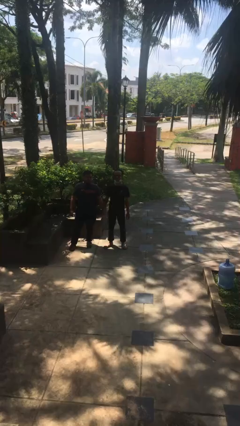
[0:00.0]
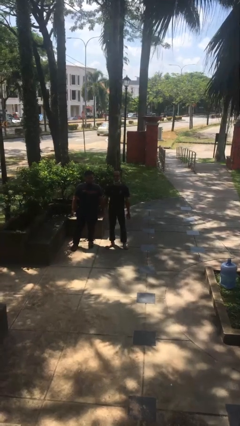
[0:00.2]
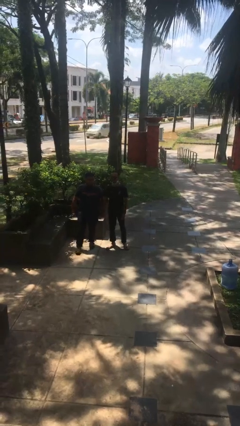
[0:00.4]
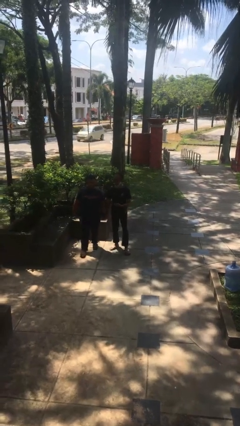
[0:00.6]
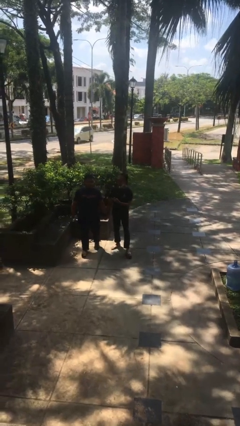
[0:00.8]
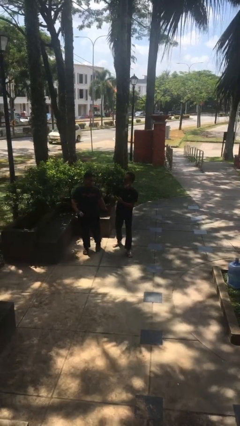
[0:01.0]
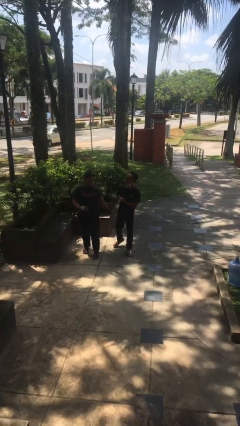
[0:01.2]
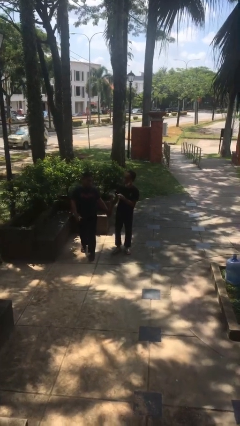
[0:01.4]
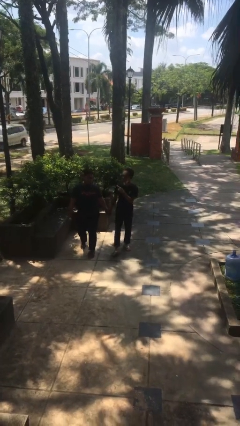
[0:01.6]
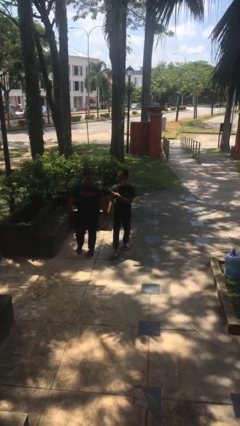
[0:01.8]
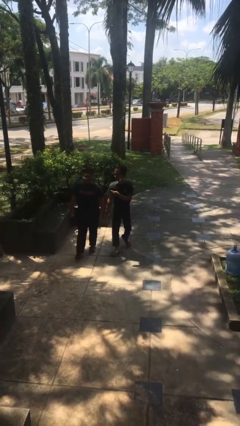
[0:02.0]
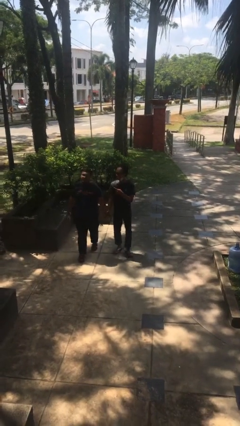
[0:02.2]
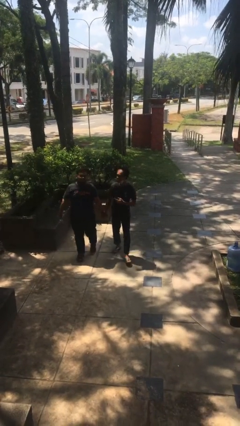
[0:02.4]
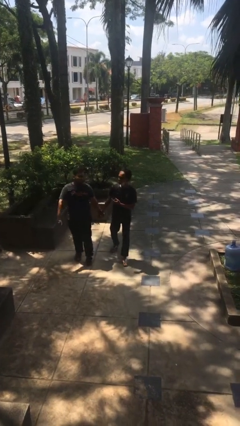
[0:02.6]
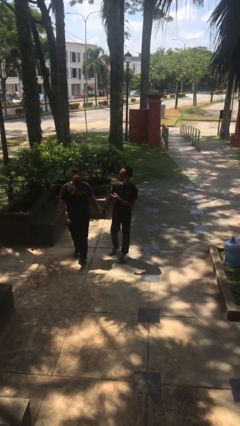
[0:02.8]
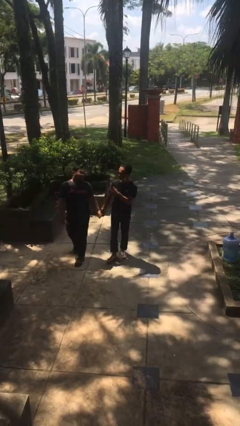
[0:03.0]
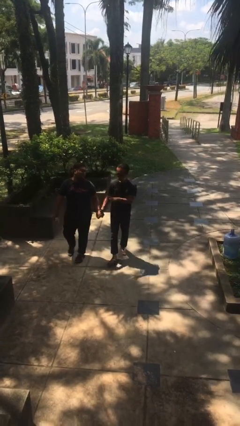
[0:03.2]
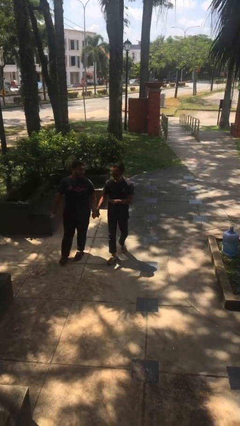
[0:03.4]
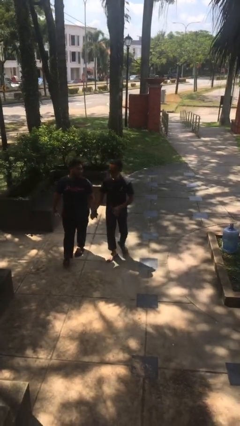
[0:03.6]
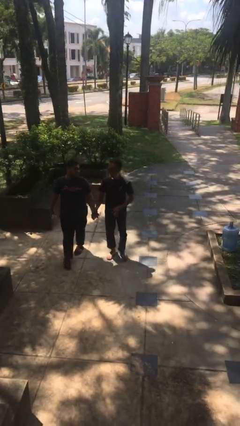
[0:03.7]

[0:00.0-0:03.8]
person holds hand

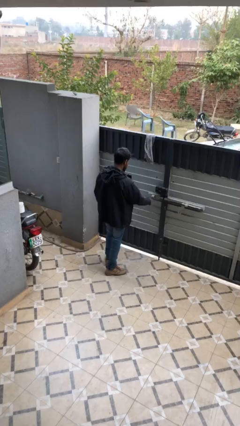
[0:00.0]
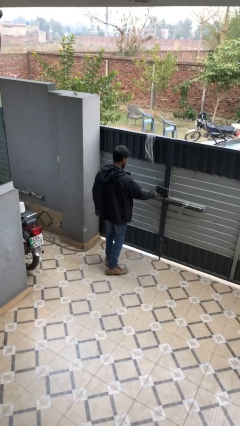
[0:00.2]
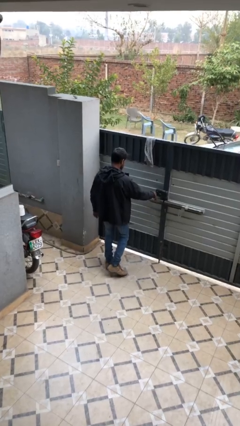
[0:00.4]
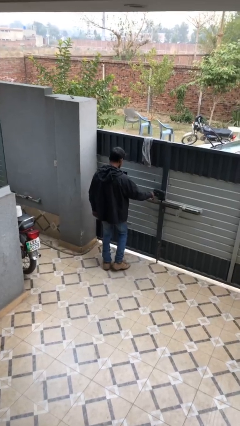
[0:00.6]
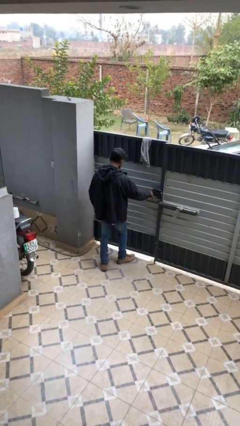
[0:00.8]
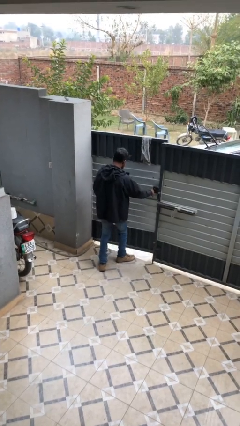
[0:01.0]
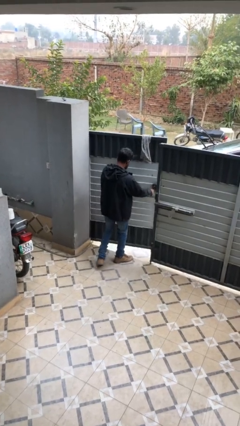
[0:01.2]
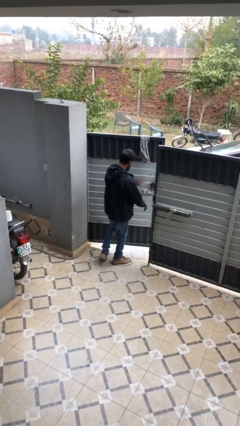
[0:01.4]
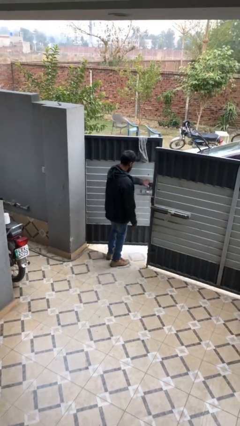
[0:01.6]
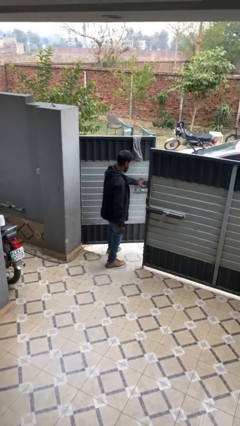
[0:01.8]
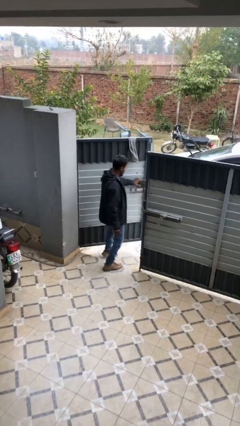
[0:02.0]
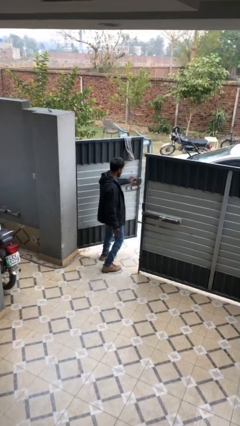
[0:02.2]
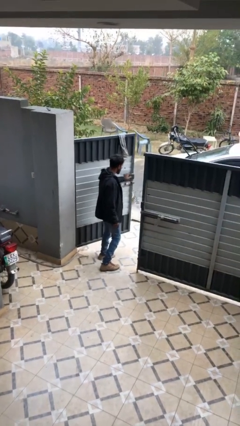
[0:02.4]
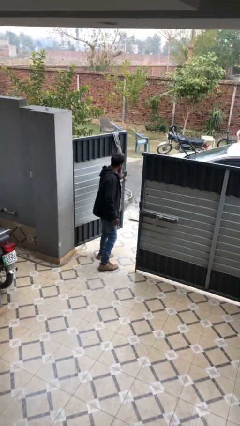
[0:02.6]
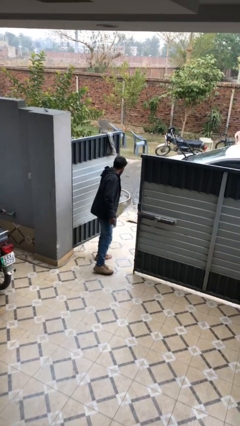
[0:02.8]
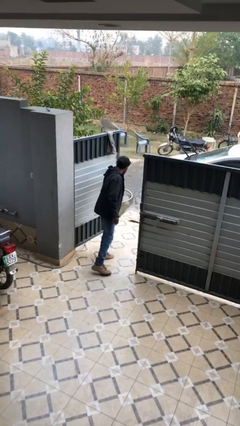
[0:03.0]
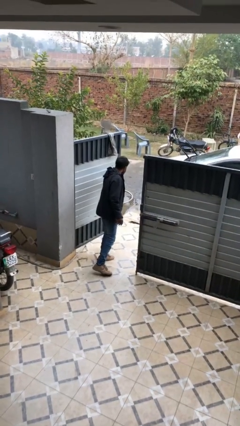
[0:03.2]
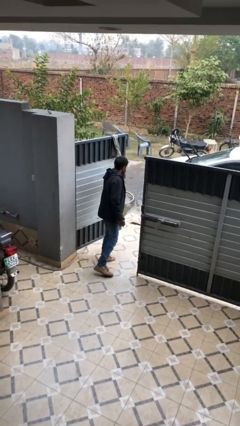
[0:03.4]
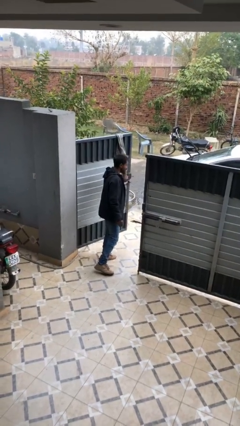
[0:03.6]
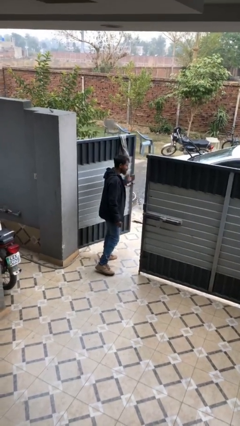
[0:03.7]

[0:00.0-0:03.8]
person opens facility door

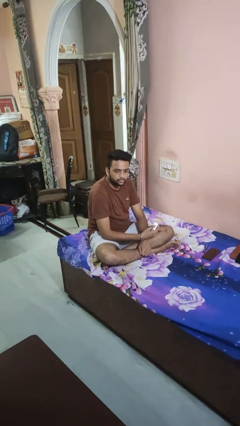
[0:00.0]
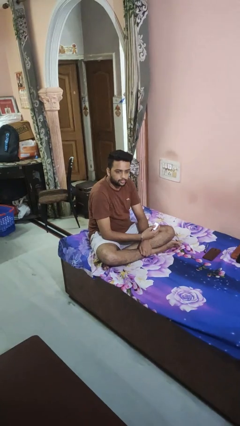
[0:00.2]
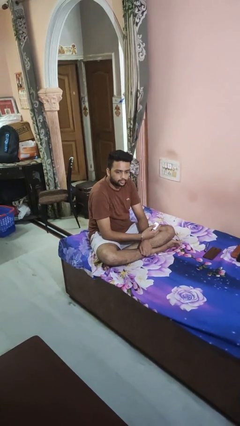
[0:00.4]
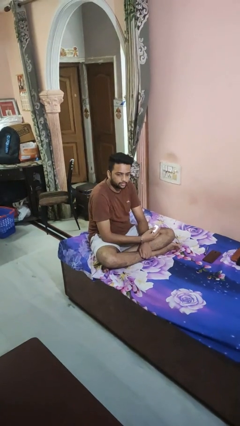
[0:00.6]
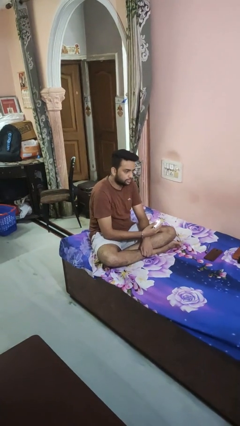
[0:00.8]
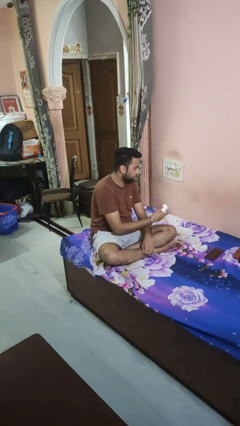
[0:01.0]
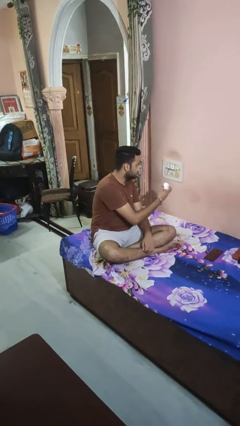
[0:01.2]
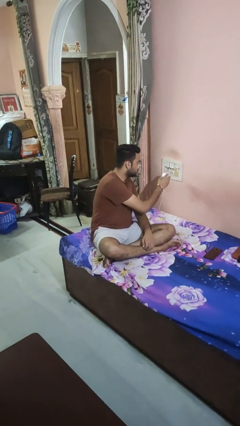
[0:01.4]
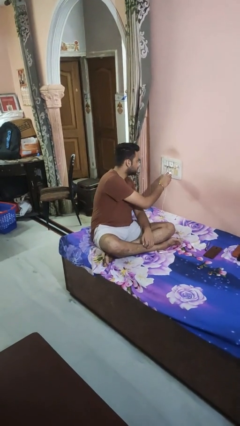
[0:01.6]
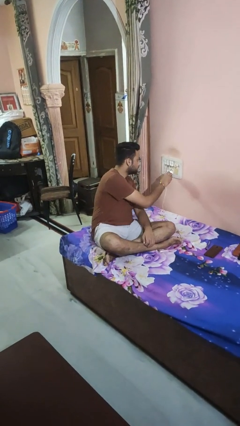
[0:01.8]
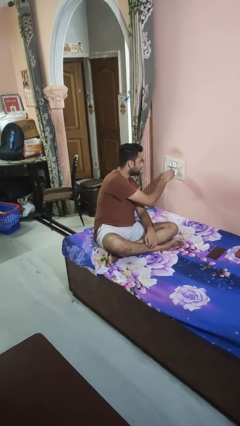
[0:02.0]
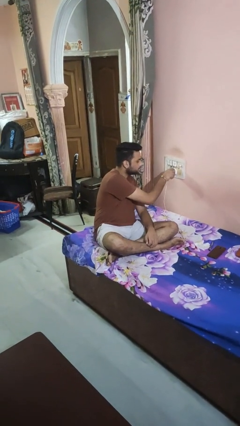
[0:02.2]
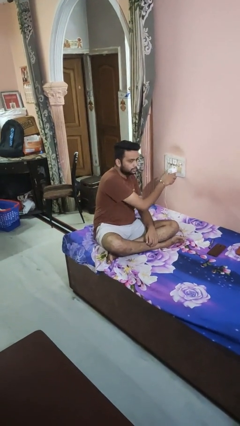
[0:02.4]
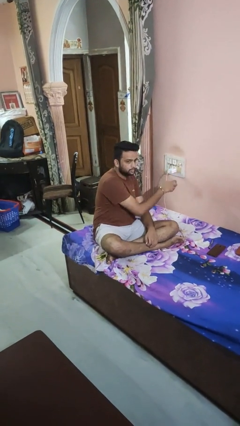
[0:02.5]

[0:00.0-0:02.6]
person plugs into electrical socket

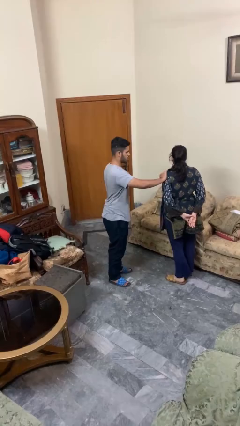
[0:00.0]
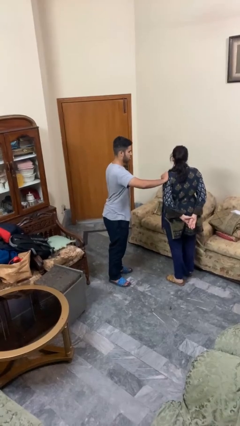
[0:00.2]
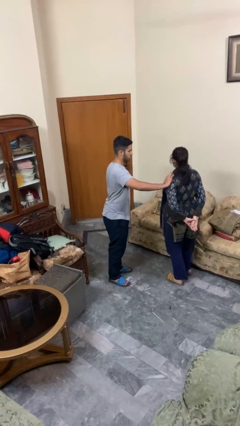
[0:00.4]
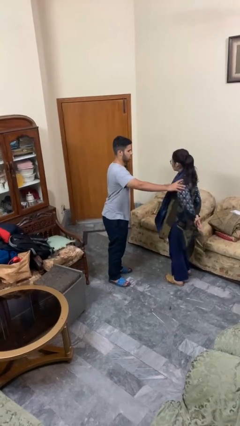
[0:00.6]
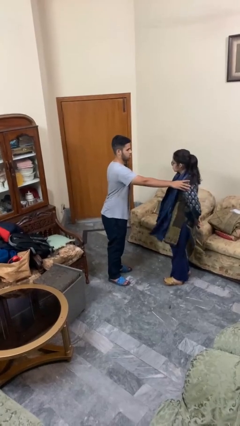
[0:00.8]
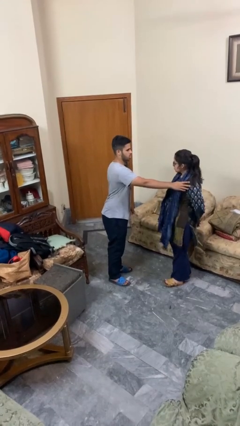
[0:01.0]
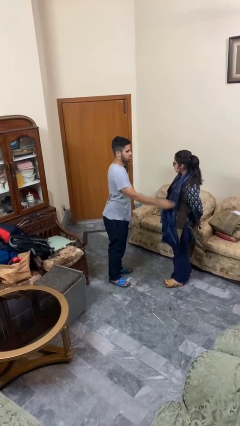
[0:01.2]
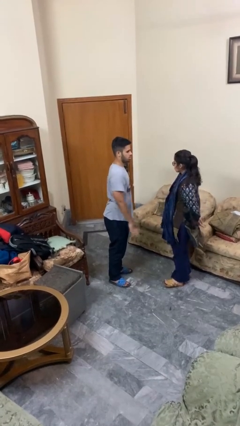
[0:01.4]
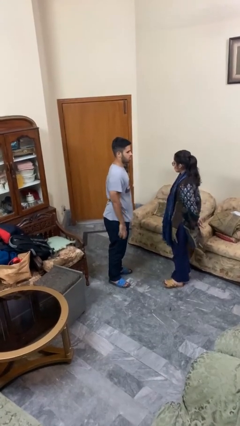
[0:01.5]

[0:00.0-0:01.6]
person spins person around

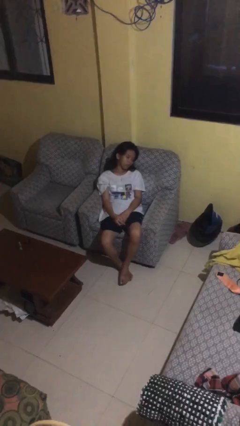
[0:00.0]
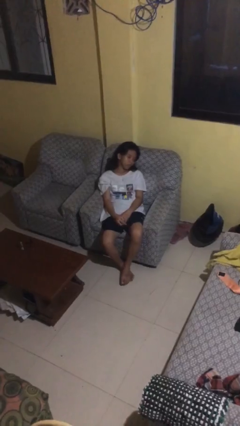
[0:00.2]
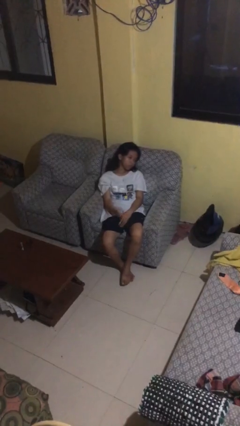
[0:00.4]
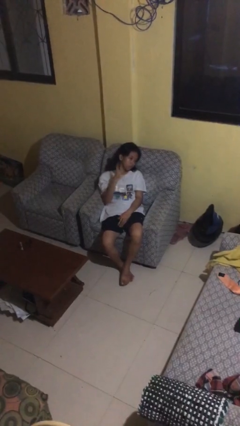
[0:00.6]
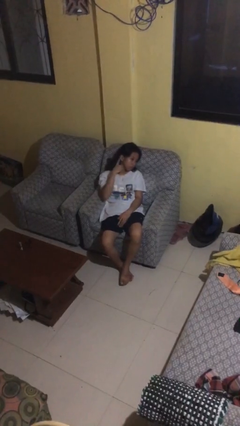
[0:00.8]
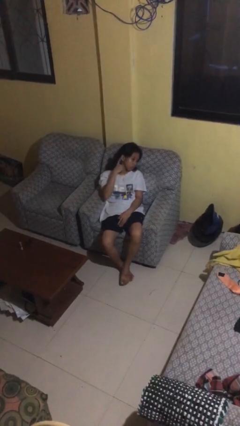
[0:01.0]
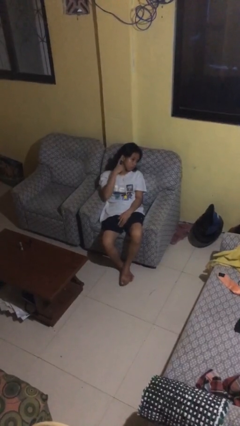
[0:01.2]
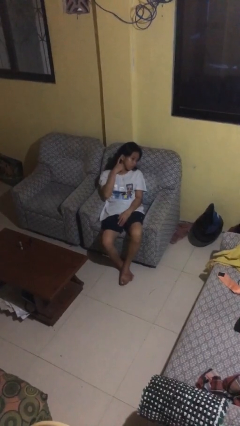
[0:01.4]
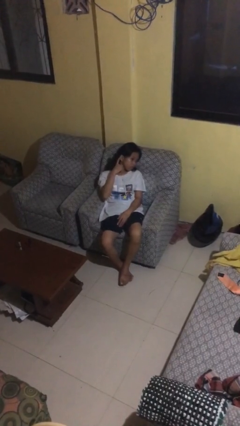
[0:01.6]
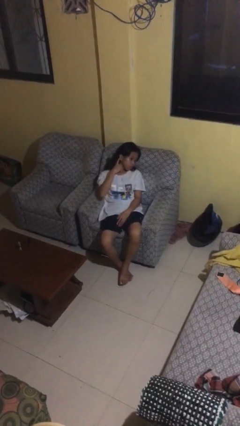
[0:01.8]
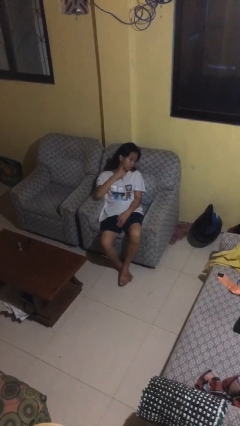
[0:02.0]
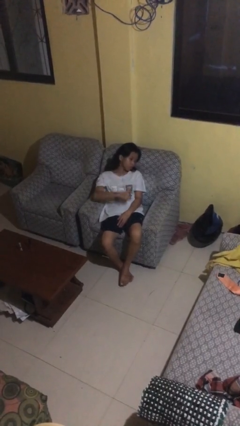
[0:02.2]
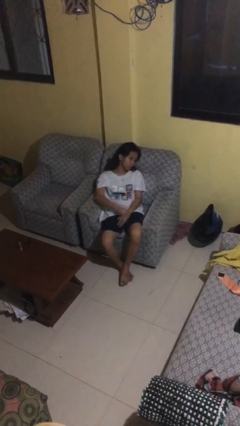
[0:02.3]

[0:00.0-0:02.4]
person gestures listen closely

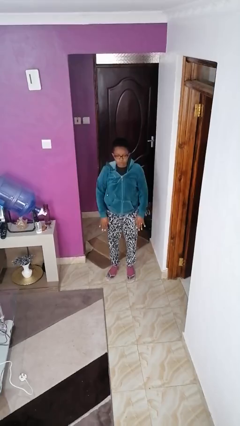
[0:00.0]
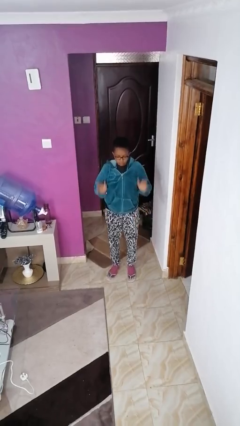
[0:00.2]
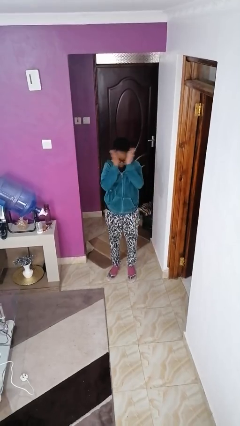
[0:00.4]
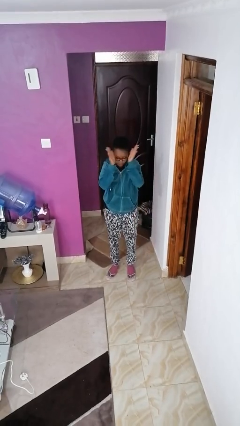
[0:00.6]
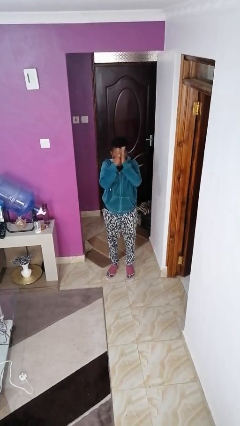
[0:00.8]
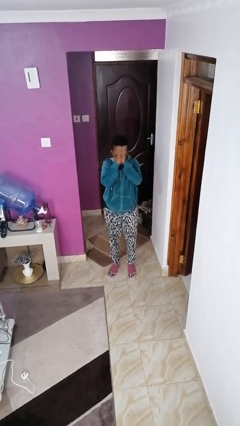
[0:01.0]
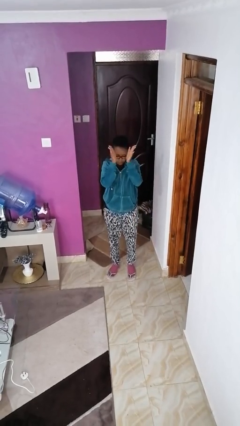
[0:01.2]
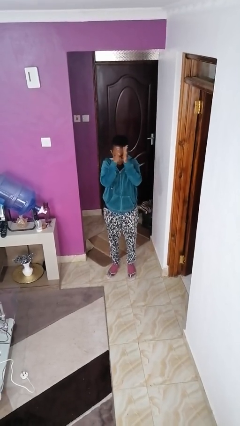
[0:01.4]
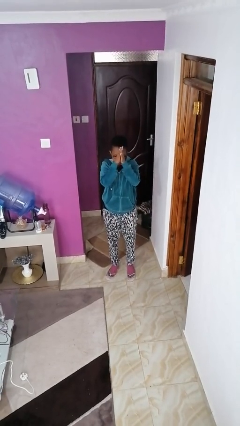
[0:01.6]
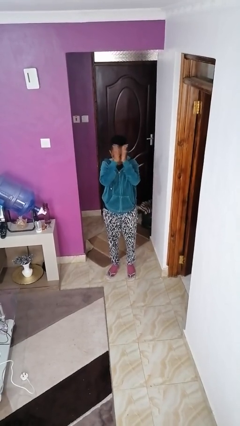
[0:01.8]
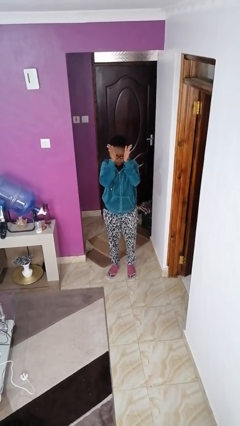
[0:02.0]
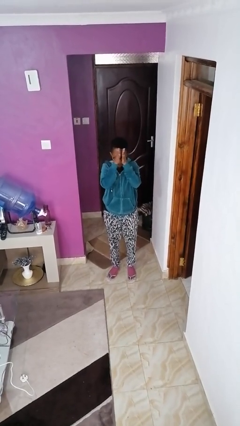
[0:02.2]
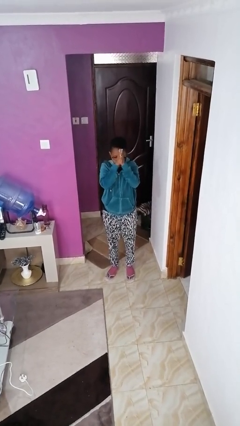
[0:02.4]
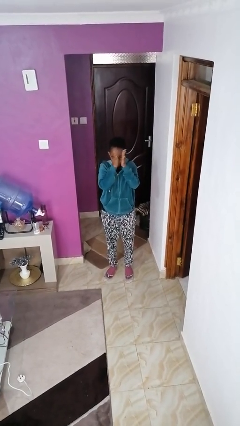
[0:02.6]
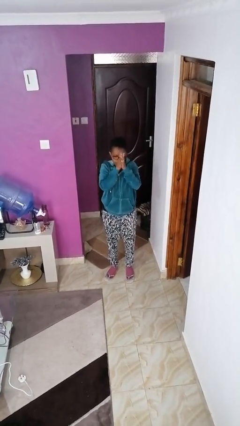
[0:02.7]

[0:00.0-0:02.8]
person claps hands

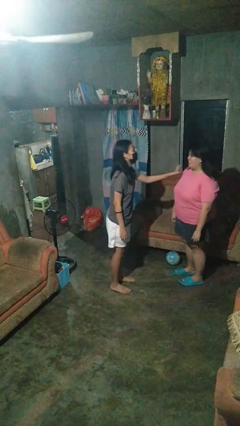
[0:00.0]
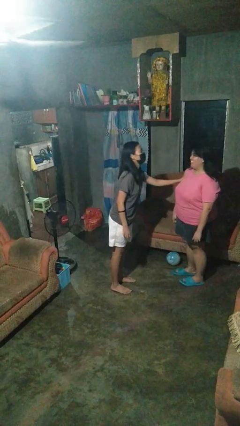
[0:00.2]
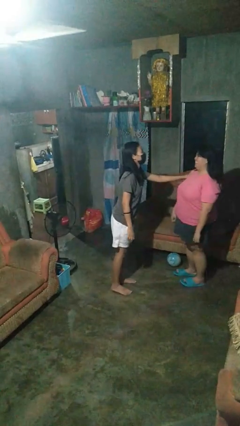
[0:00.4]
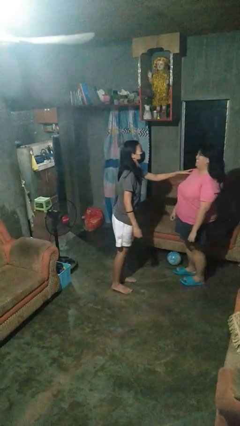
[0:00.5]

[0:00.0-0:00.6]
person shoves person
